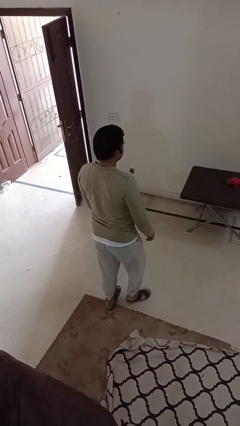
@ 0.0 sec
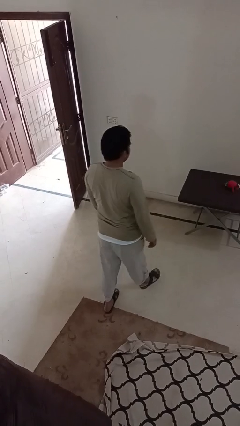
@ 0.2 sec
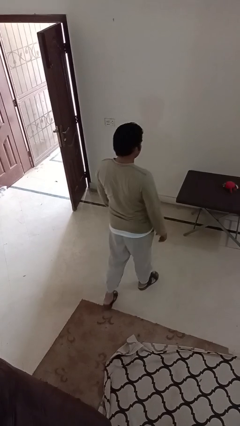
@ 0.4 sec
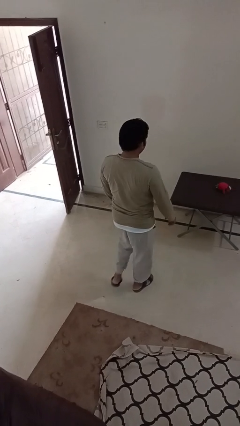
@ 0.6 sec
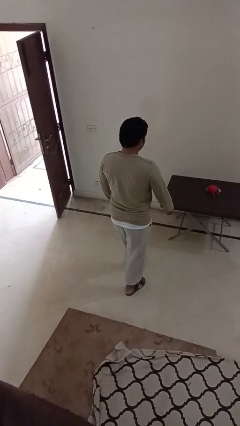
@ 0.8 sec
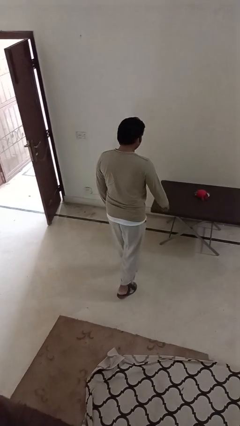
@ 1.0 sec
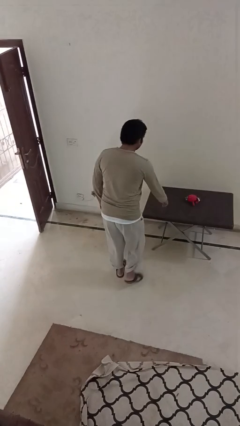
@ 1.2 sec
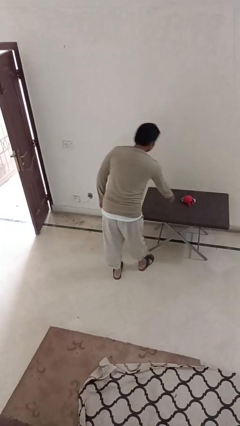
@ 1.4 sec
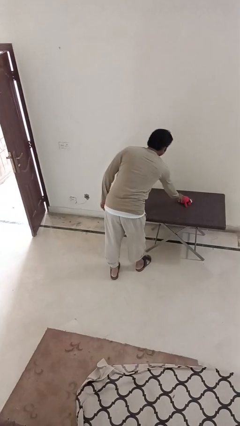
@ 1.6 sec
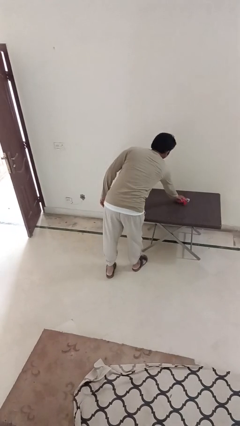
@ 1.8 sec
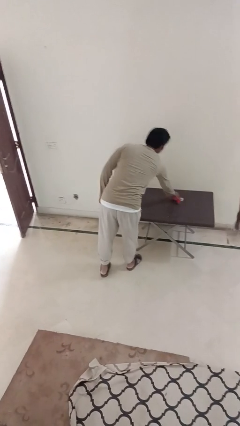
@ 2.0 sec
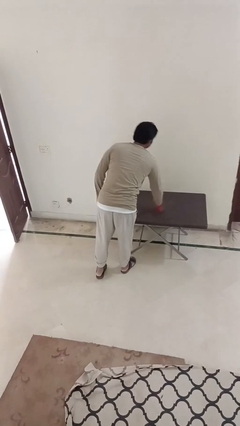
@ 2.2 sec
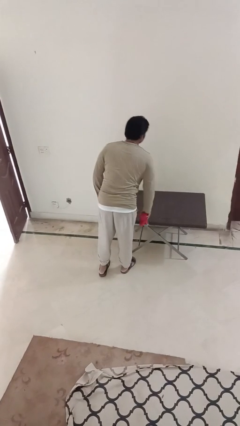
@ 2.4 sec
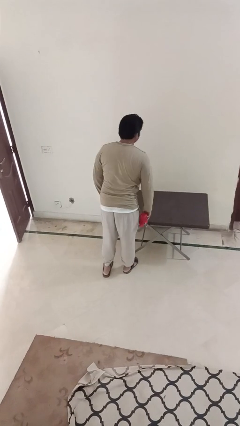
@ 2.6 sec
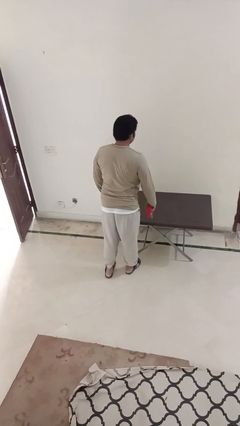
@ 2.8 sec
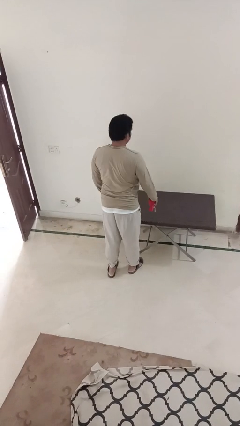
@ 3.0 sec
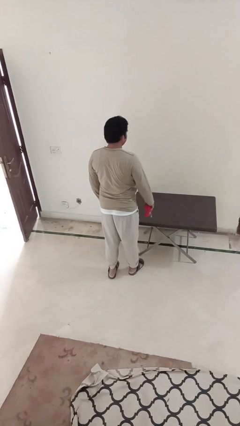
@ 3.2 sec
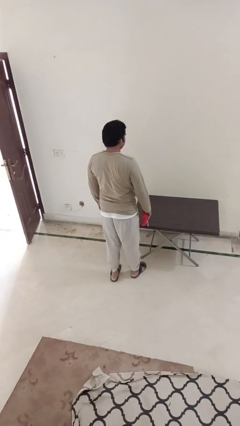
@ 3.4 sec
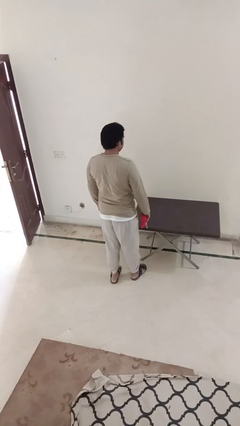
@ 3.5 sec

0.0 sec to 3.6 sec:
person picks up object from table

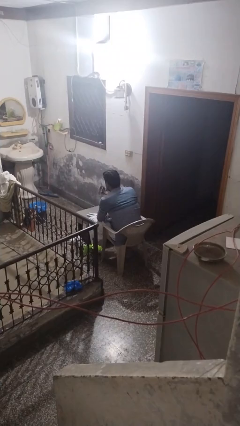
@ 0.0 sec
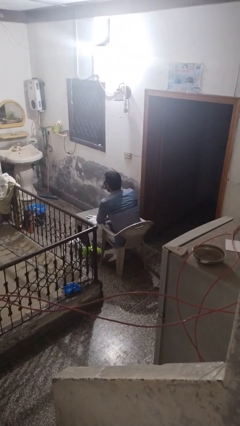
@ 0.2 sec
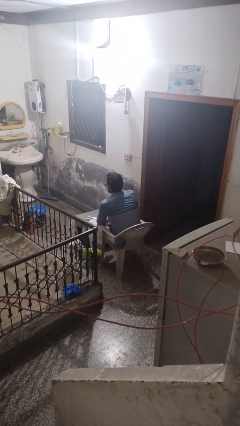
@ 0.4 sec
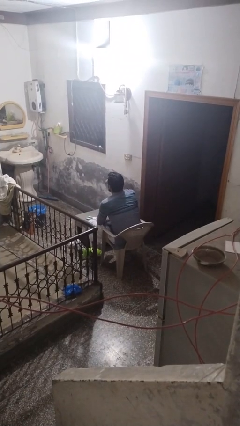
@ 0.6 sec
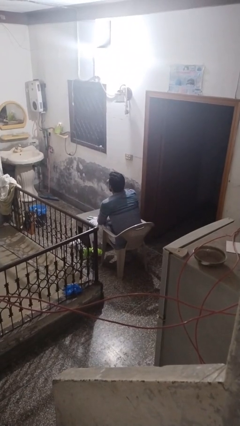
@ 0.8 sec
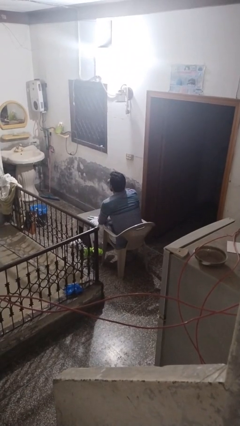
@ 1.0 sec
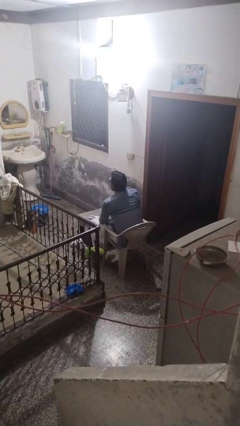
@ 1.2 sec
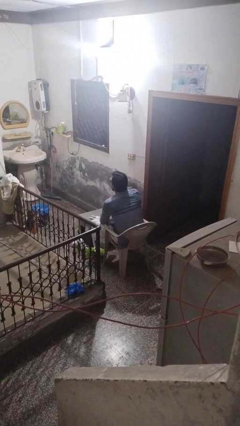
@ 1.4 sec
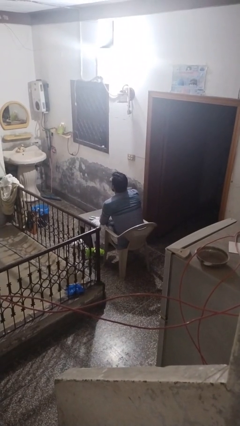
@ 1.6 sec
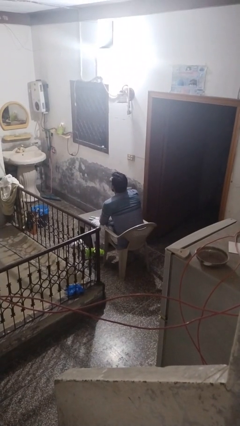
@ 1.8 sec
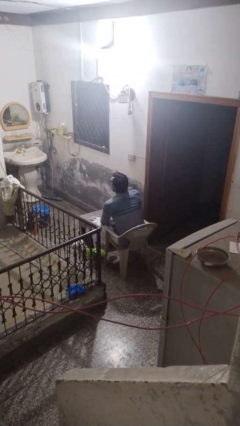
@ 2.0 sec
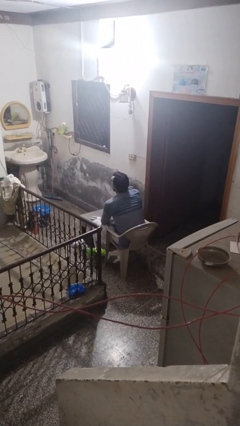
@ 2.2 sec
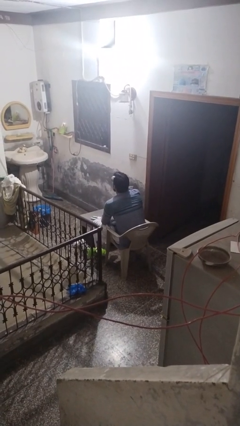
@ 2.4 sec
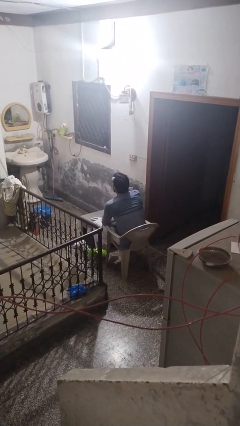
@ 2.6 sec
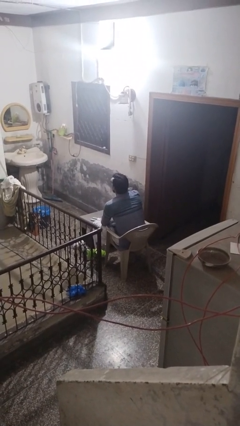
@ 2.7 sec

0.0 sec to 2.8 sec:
person drinks from cup

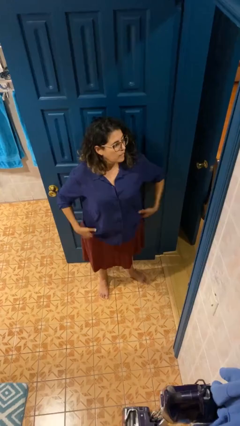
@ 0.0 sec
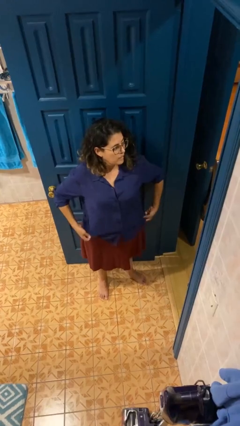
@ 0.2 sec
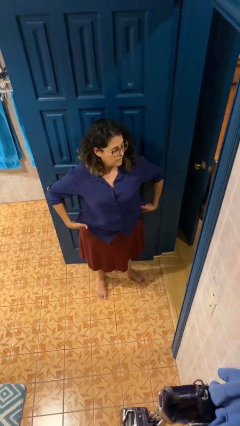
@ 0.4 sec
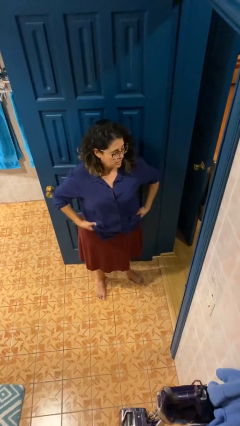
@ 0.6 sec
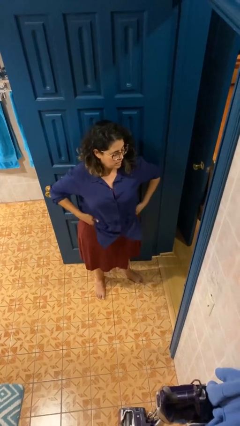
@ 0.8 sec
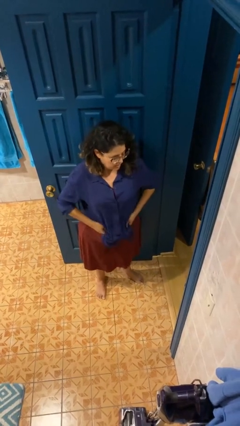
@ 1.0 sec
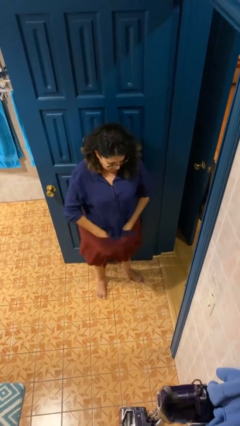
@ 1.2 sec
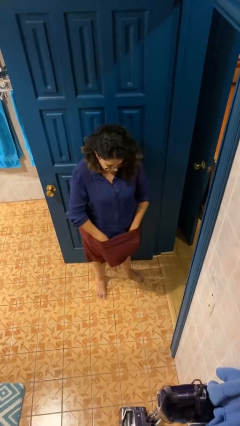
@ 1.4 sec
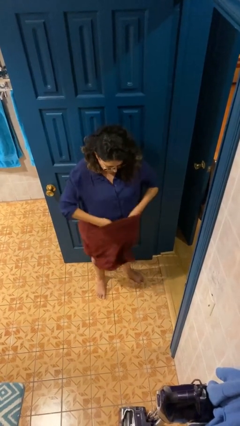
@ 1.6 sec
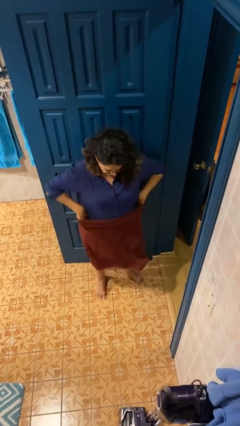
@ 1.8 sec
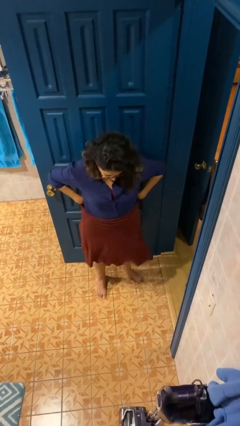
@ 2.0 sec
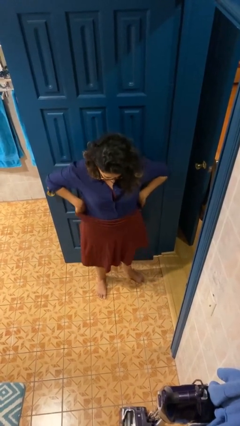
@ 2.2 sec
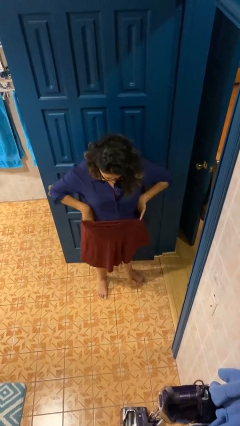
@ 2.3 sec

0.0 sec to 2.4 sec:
person tucks in shirt

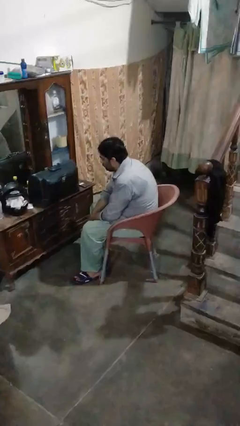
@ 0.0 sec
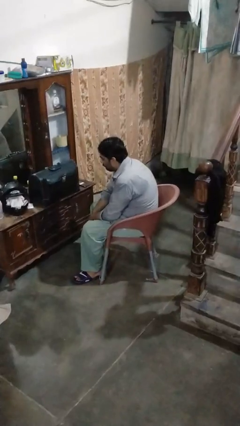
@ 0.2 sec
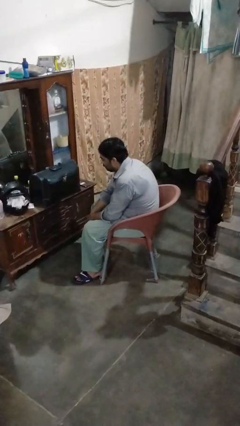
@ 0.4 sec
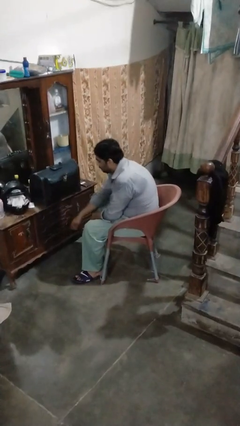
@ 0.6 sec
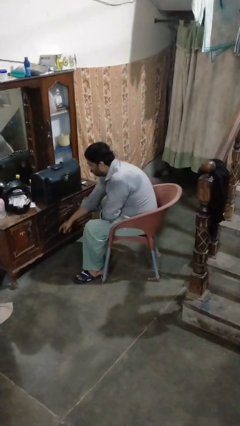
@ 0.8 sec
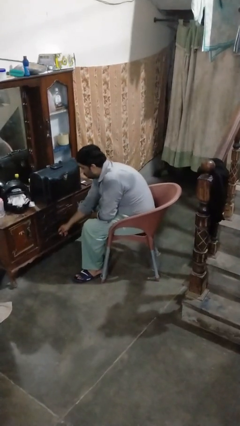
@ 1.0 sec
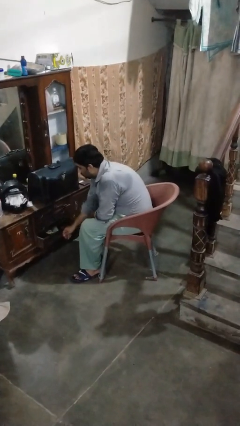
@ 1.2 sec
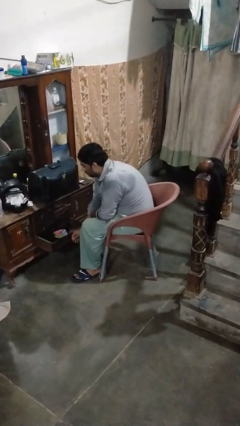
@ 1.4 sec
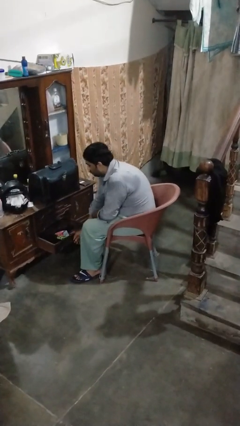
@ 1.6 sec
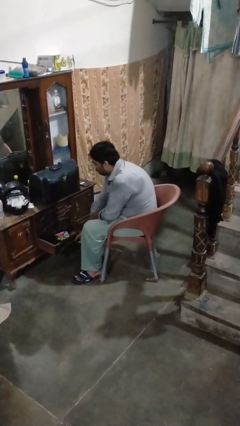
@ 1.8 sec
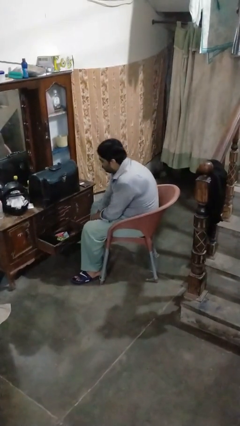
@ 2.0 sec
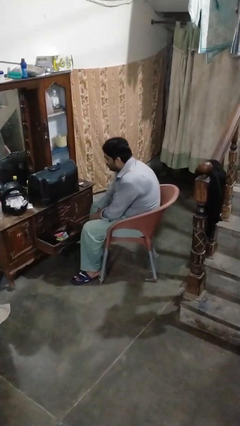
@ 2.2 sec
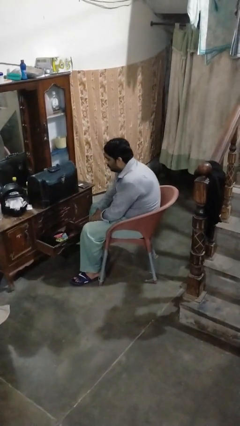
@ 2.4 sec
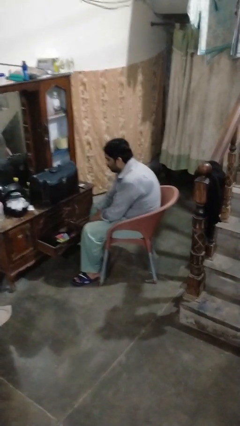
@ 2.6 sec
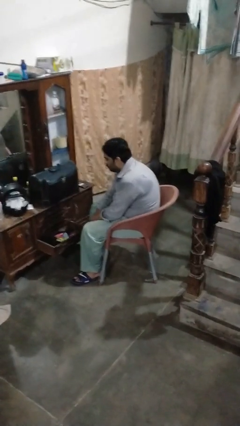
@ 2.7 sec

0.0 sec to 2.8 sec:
person opens dresser drawer

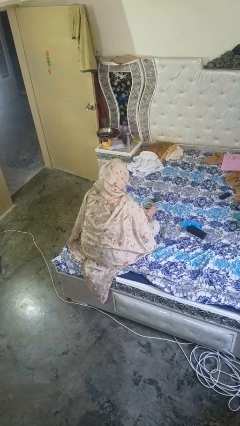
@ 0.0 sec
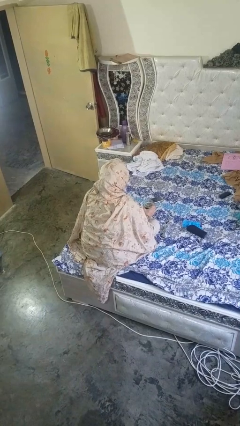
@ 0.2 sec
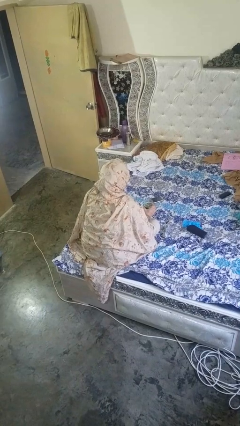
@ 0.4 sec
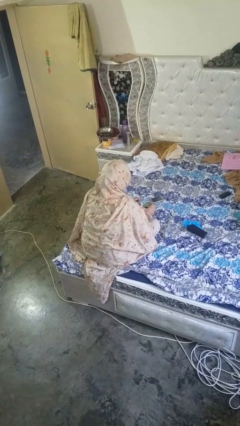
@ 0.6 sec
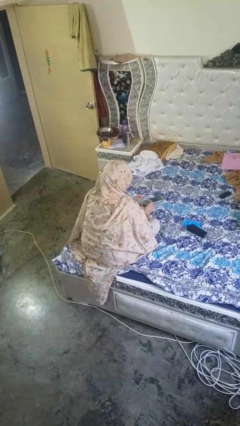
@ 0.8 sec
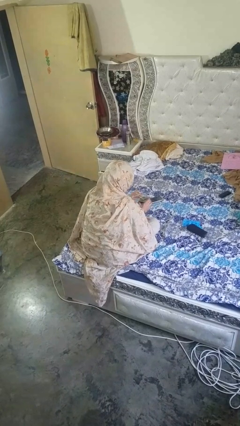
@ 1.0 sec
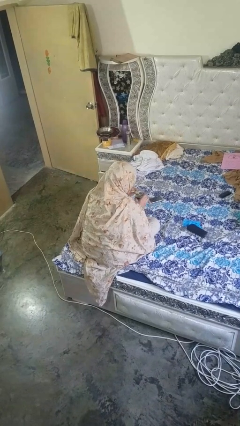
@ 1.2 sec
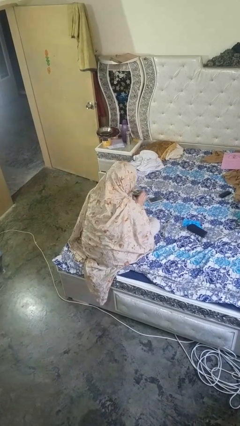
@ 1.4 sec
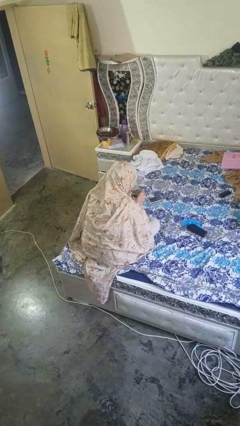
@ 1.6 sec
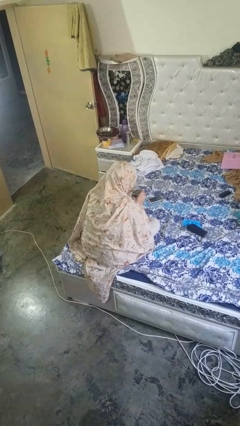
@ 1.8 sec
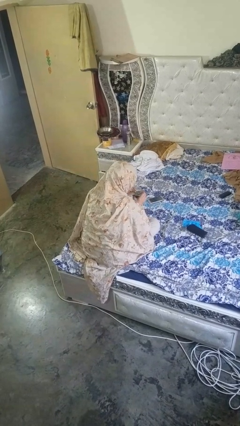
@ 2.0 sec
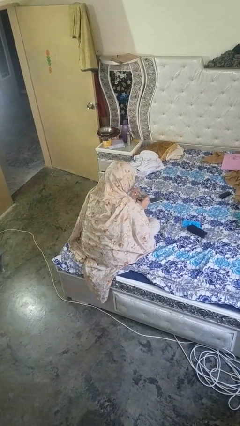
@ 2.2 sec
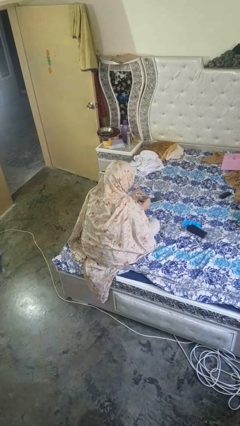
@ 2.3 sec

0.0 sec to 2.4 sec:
person drinks from straw

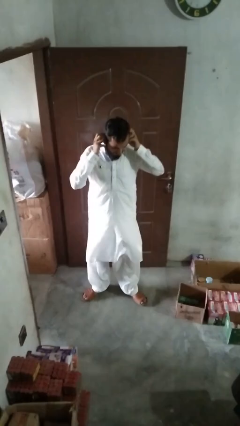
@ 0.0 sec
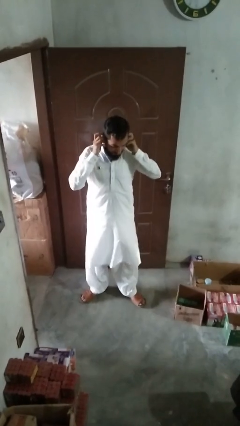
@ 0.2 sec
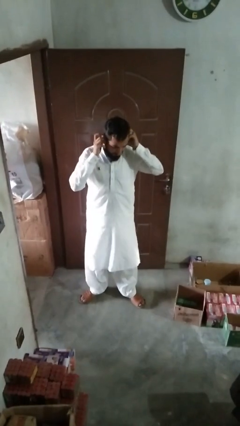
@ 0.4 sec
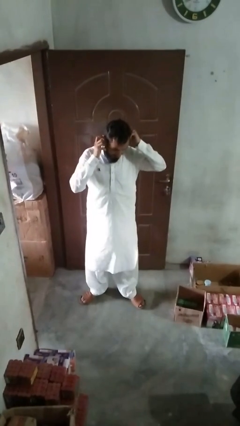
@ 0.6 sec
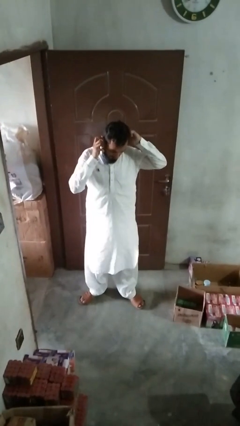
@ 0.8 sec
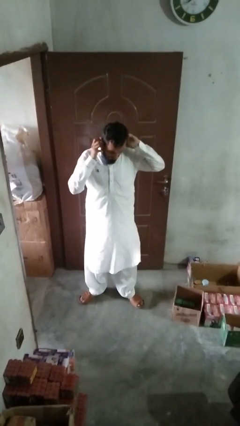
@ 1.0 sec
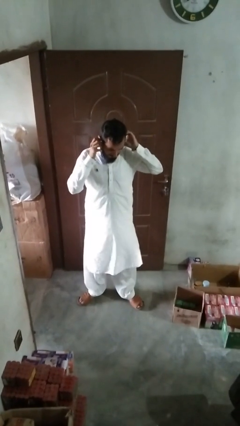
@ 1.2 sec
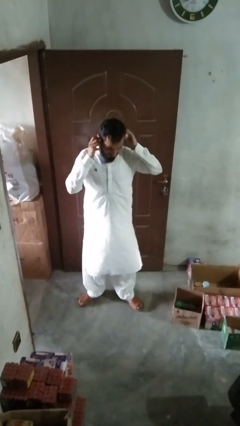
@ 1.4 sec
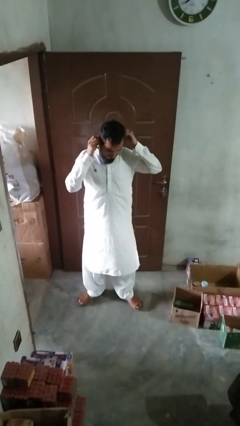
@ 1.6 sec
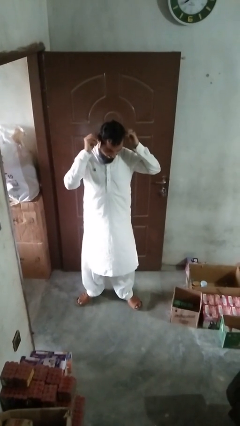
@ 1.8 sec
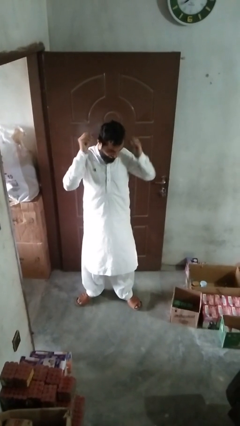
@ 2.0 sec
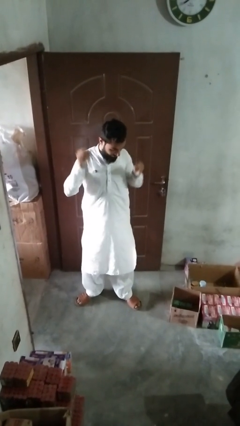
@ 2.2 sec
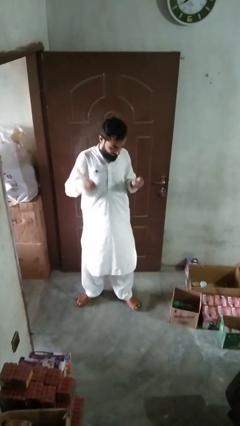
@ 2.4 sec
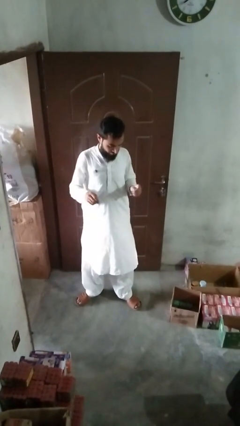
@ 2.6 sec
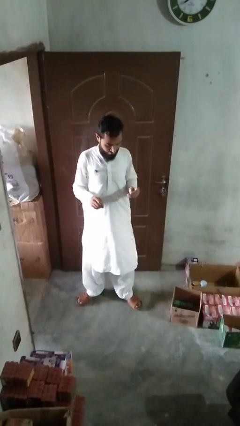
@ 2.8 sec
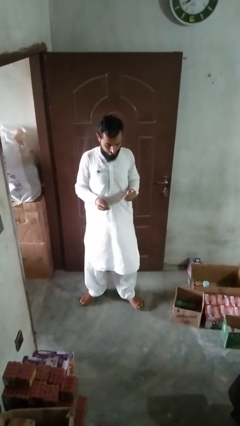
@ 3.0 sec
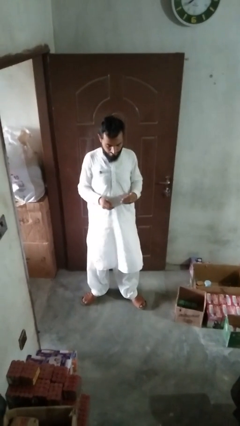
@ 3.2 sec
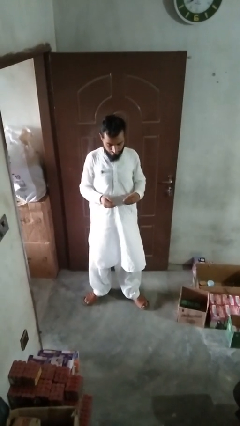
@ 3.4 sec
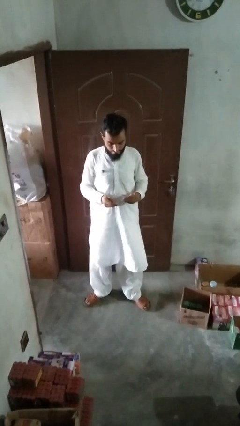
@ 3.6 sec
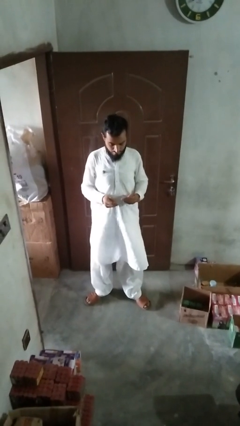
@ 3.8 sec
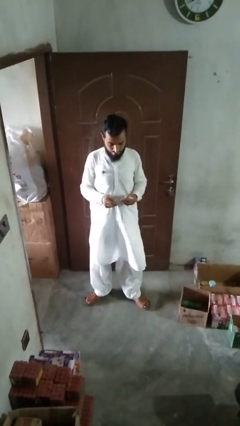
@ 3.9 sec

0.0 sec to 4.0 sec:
person takes off earrings
